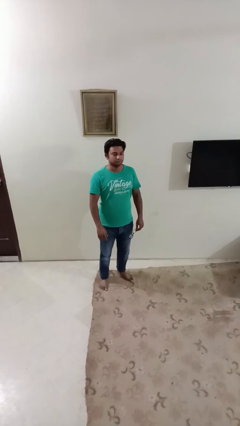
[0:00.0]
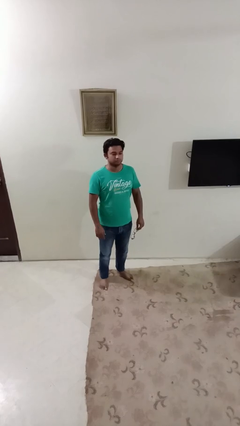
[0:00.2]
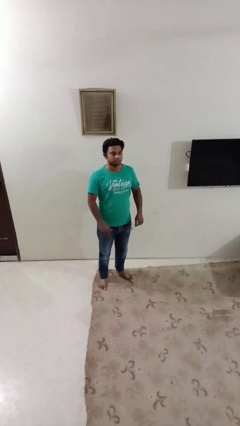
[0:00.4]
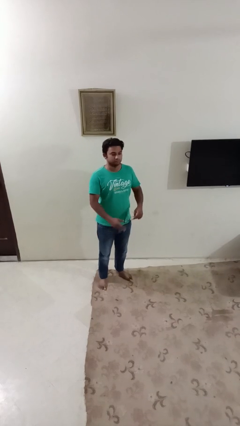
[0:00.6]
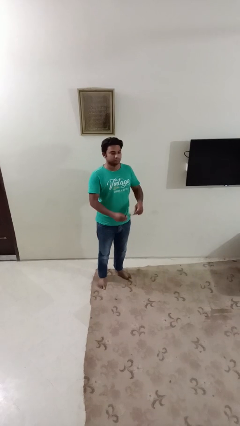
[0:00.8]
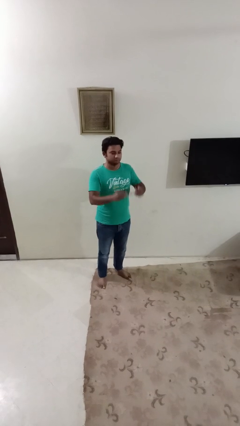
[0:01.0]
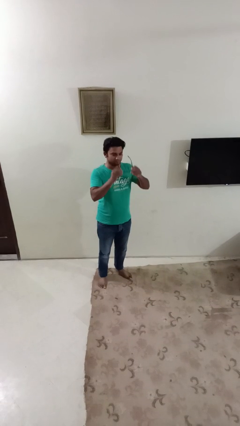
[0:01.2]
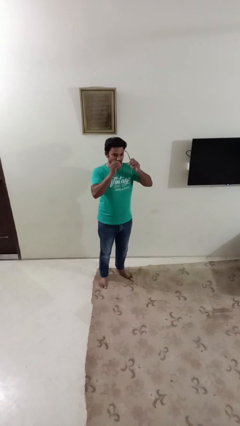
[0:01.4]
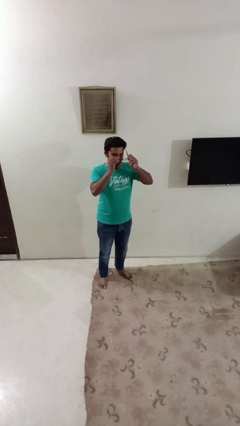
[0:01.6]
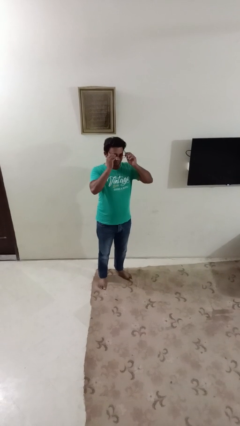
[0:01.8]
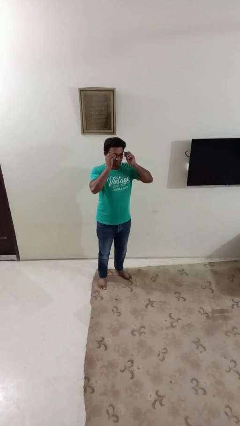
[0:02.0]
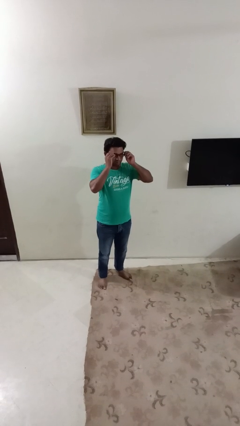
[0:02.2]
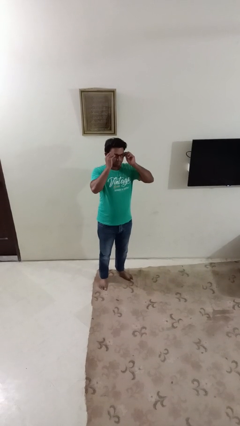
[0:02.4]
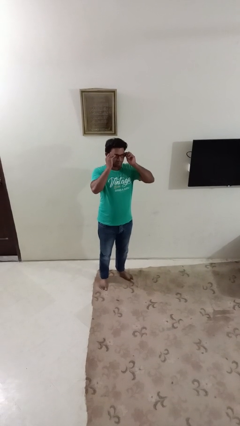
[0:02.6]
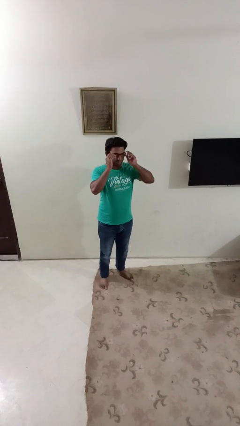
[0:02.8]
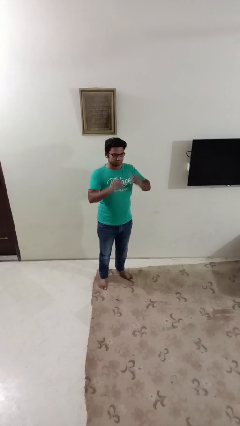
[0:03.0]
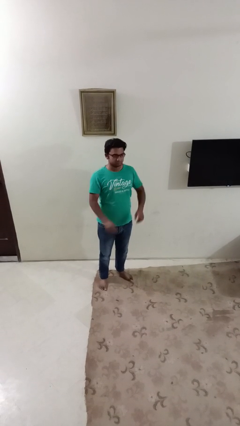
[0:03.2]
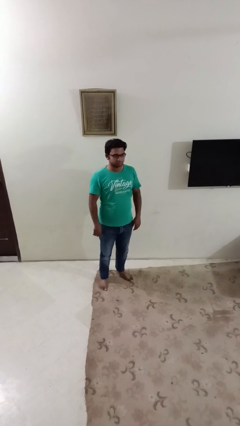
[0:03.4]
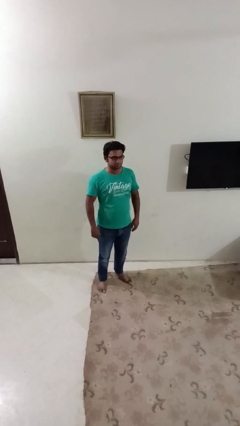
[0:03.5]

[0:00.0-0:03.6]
person puts on glasses

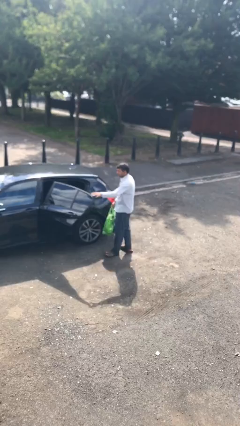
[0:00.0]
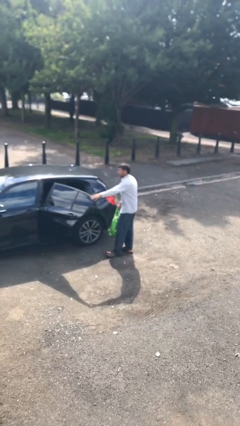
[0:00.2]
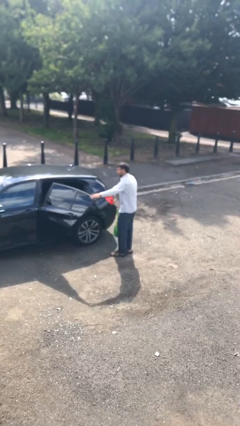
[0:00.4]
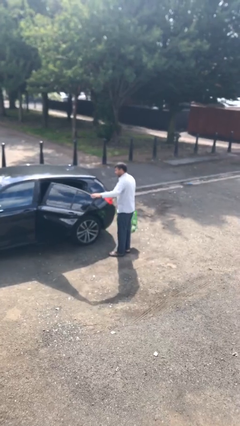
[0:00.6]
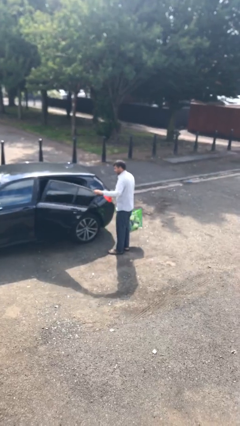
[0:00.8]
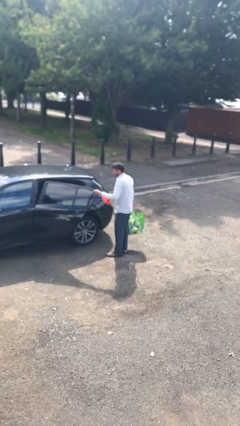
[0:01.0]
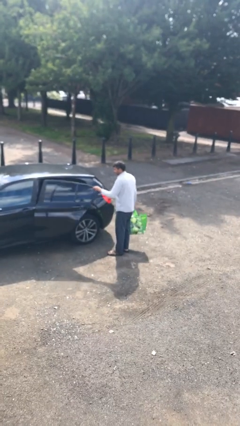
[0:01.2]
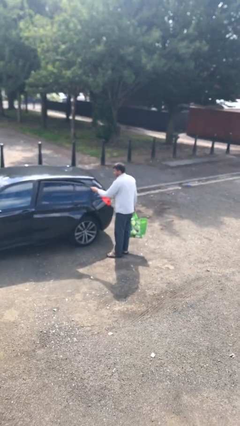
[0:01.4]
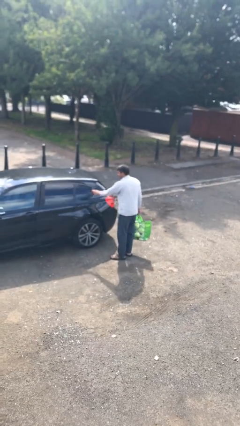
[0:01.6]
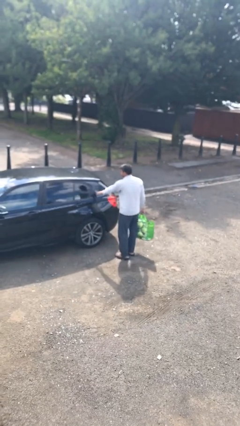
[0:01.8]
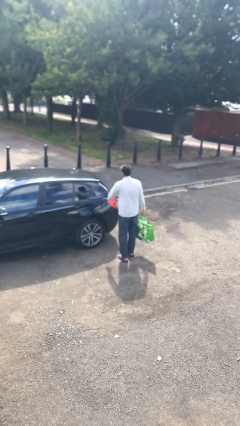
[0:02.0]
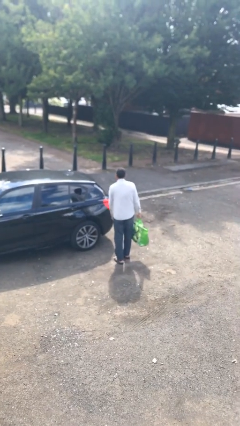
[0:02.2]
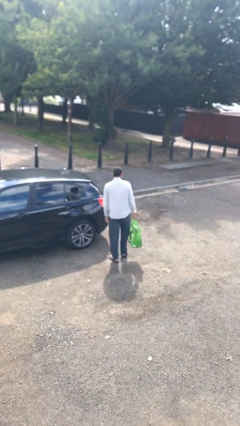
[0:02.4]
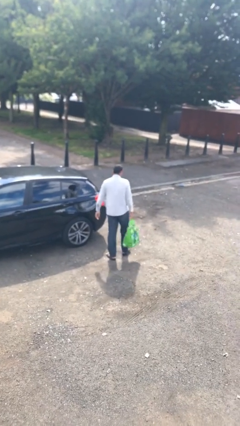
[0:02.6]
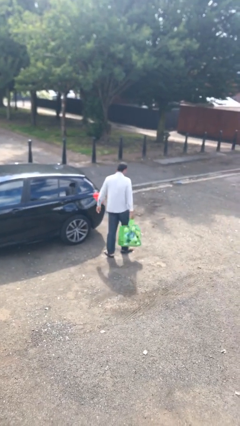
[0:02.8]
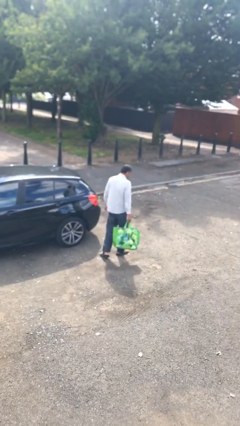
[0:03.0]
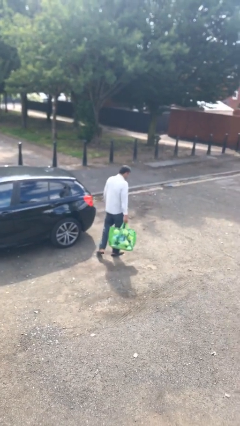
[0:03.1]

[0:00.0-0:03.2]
person closes car door

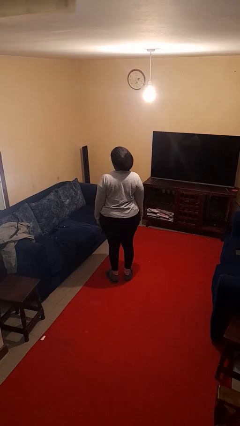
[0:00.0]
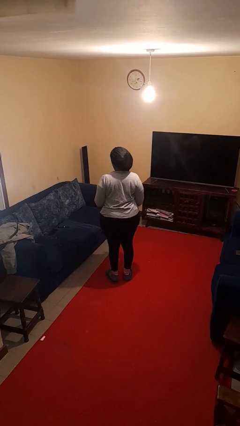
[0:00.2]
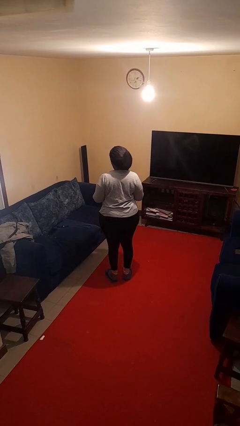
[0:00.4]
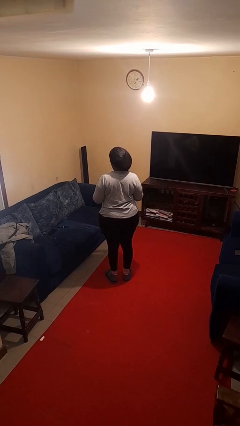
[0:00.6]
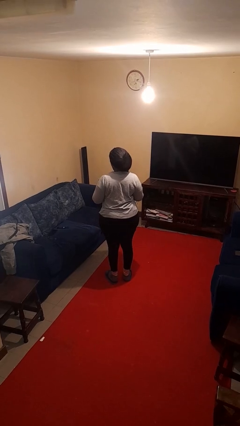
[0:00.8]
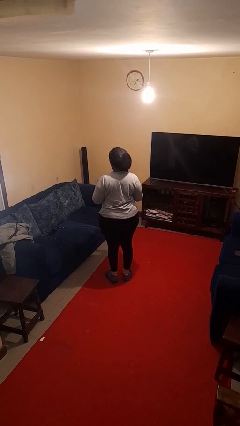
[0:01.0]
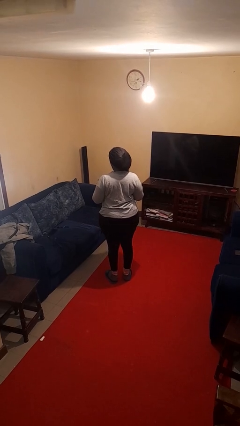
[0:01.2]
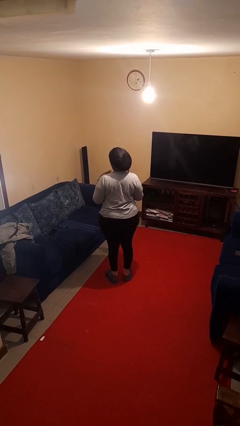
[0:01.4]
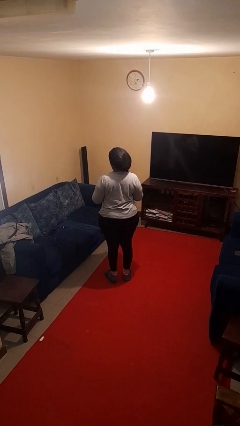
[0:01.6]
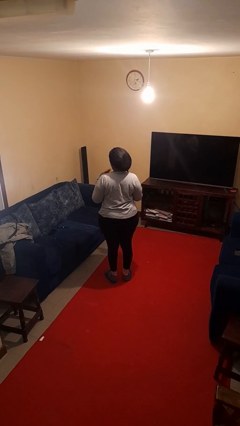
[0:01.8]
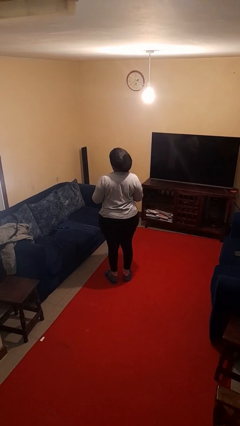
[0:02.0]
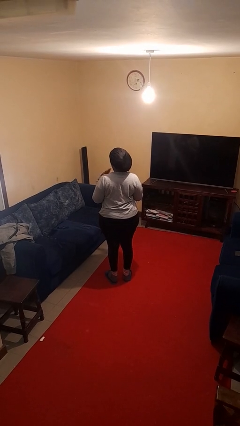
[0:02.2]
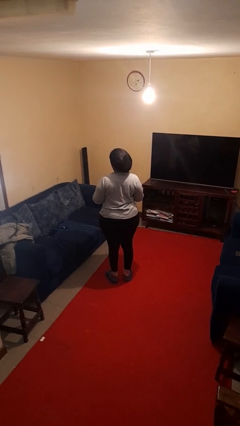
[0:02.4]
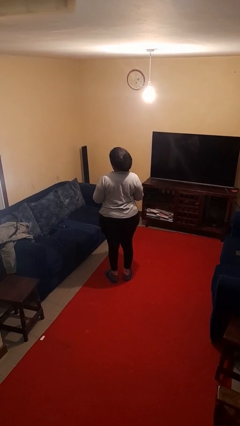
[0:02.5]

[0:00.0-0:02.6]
person drums on chest

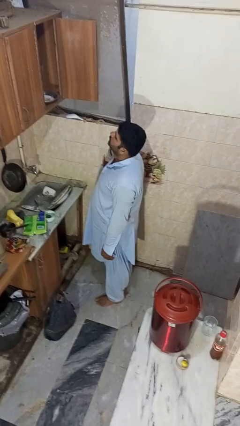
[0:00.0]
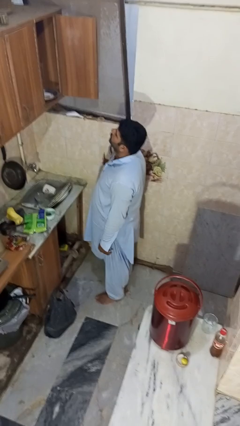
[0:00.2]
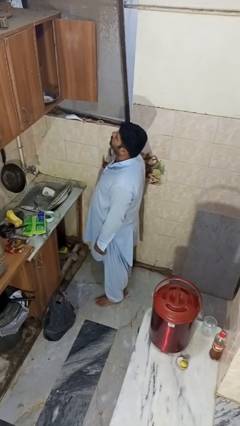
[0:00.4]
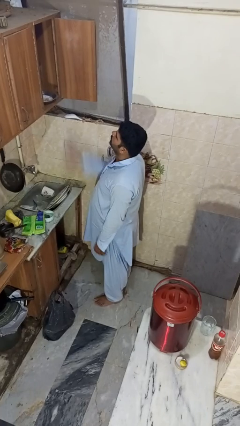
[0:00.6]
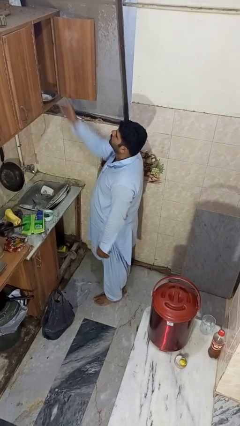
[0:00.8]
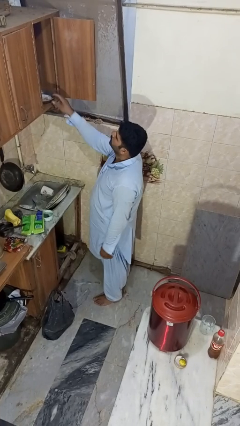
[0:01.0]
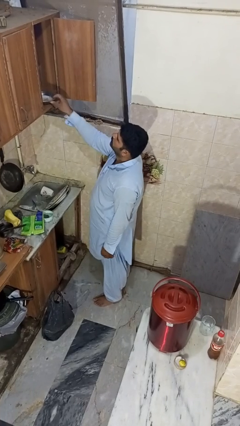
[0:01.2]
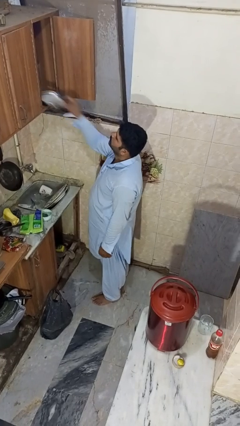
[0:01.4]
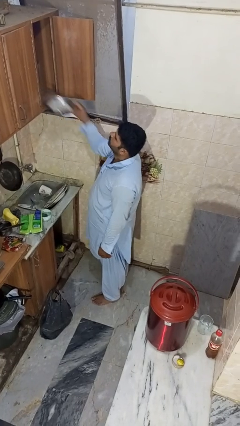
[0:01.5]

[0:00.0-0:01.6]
person takes object from cabinet

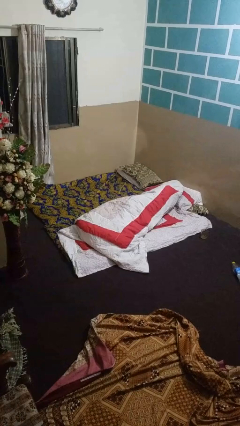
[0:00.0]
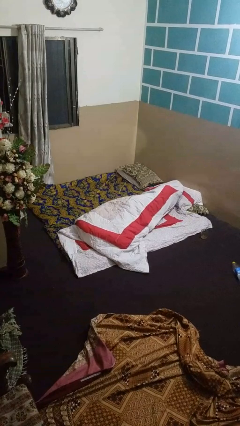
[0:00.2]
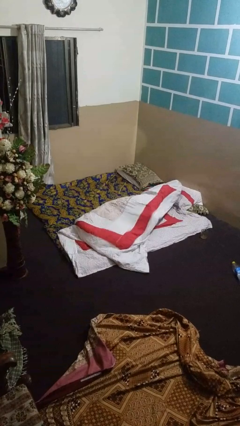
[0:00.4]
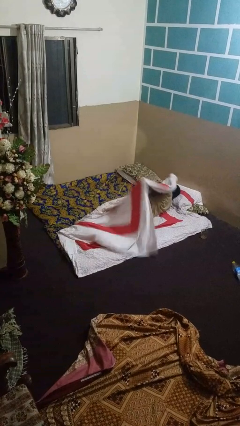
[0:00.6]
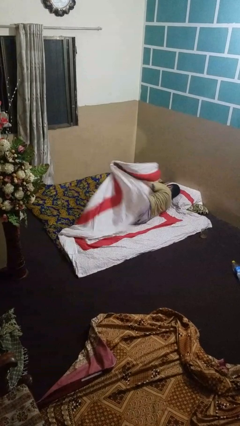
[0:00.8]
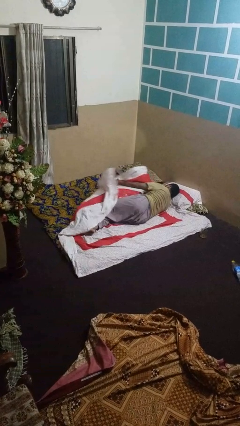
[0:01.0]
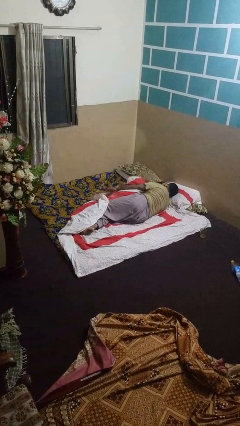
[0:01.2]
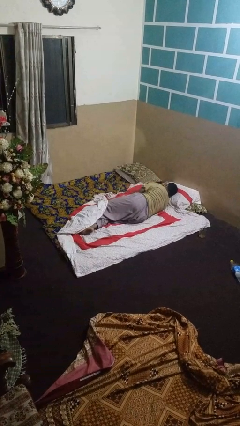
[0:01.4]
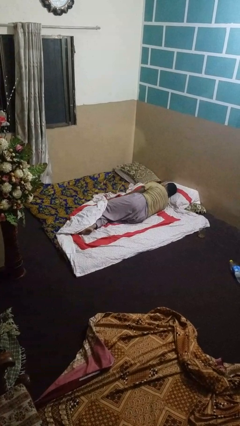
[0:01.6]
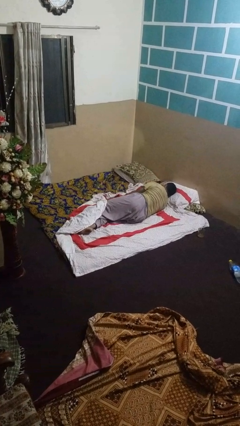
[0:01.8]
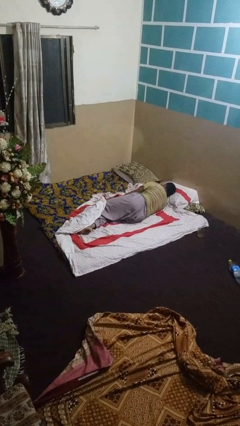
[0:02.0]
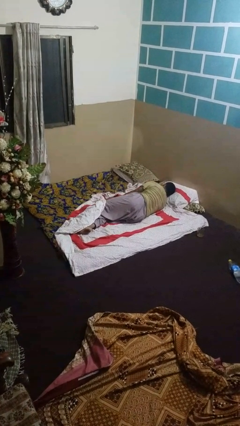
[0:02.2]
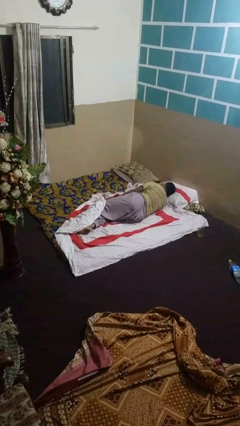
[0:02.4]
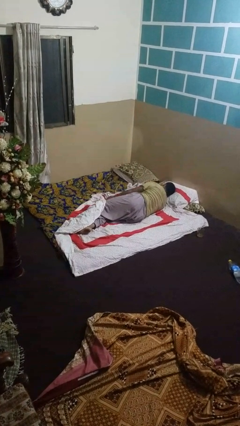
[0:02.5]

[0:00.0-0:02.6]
person uncovers with bedsheets

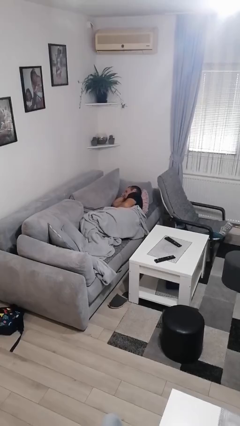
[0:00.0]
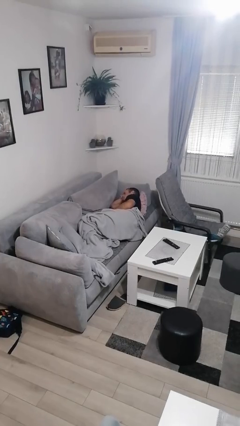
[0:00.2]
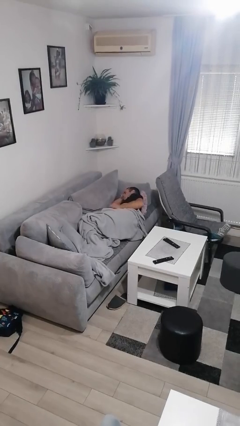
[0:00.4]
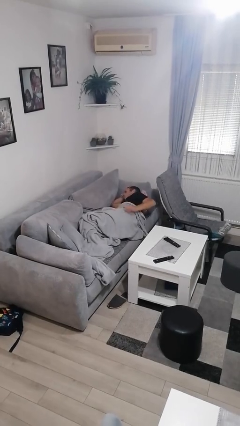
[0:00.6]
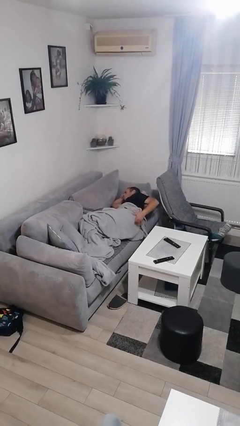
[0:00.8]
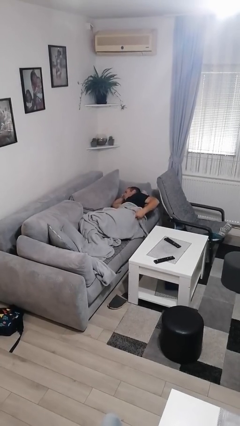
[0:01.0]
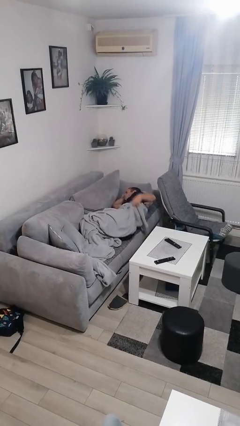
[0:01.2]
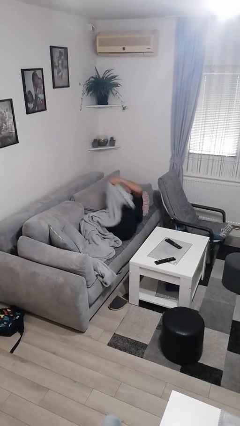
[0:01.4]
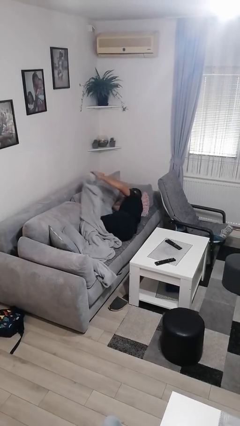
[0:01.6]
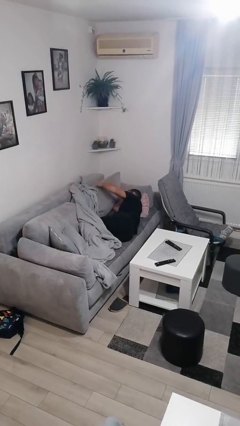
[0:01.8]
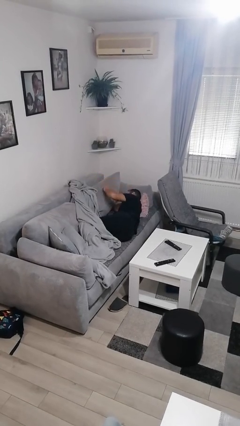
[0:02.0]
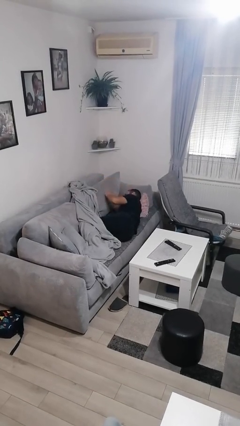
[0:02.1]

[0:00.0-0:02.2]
person uncovers with blanket

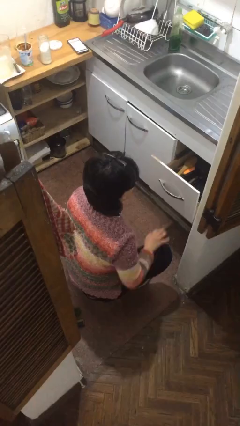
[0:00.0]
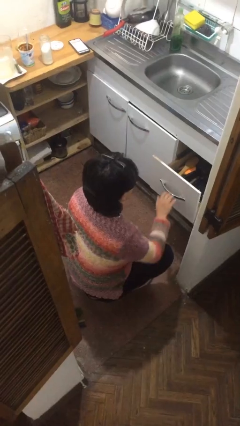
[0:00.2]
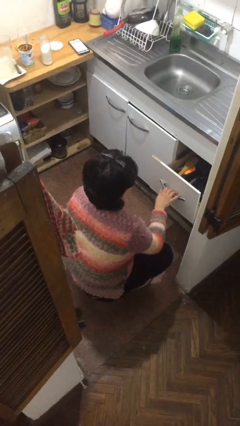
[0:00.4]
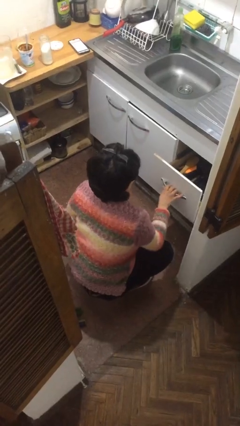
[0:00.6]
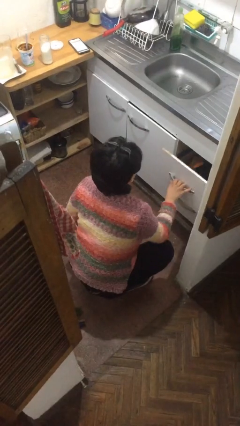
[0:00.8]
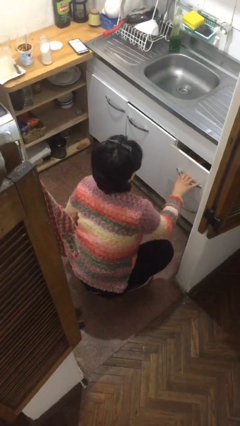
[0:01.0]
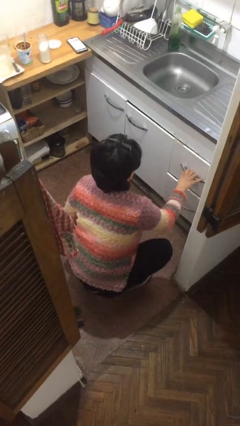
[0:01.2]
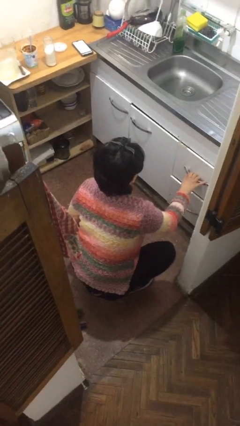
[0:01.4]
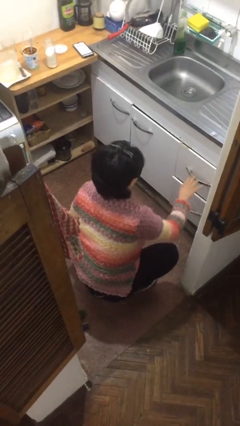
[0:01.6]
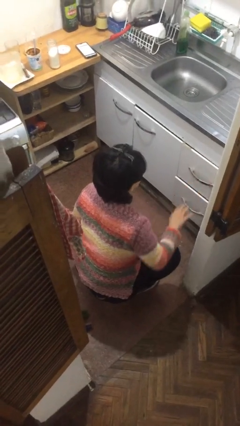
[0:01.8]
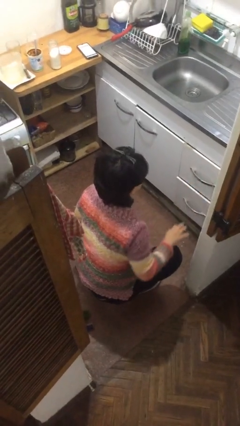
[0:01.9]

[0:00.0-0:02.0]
person closes kitchen drawer
